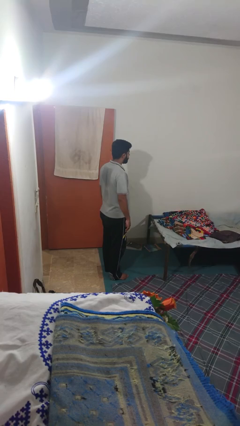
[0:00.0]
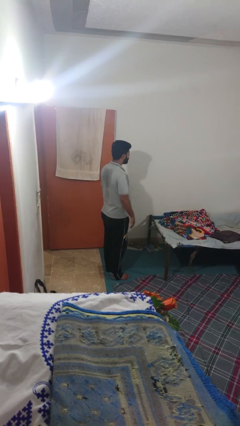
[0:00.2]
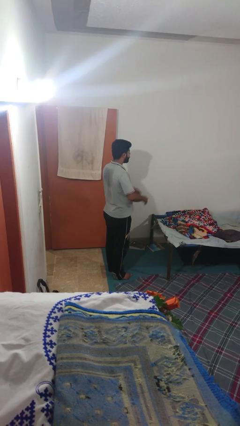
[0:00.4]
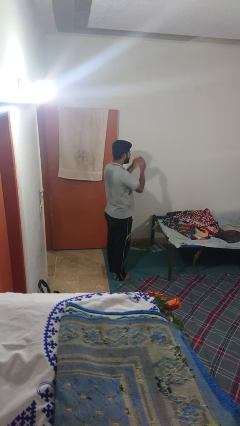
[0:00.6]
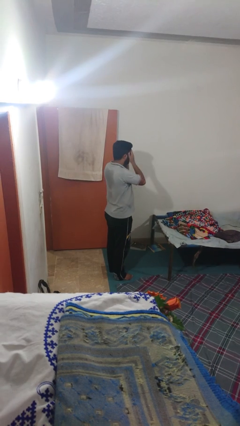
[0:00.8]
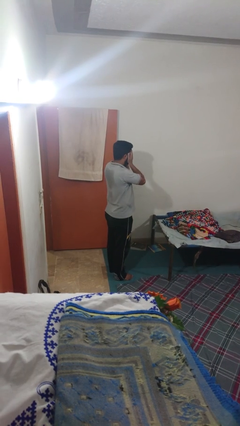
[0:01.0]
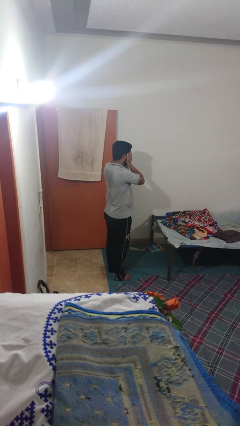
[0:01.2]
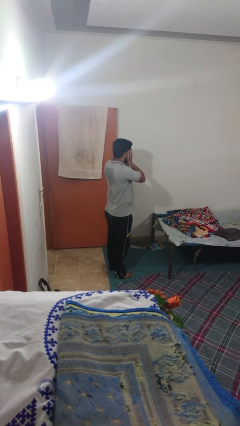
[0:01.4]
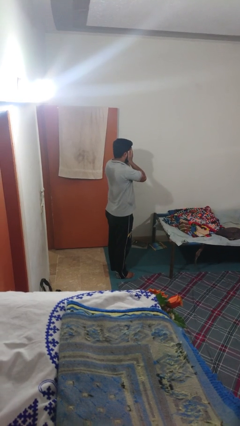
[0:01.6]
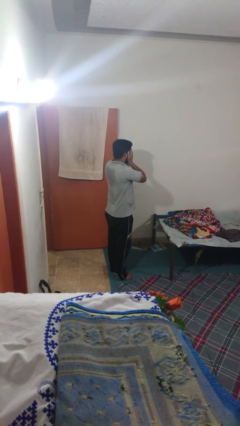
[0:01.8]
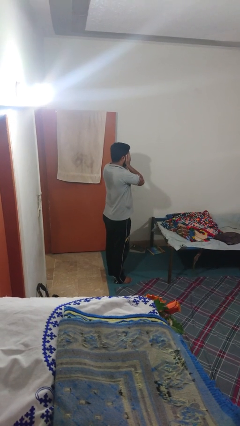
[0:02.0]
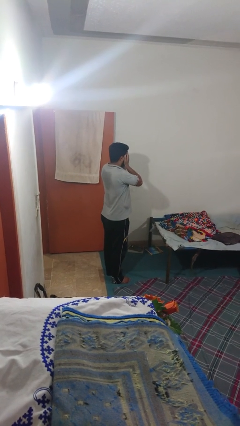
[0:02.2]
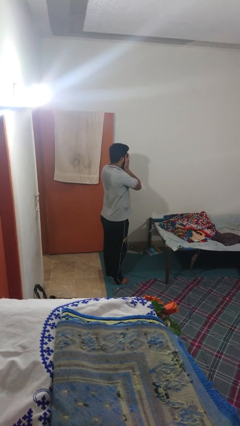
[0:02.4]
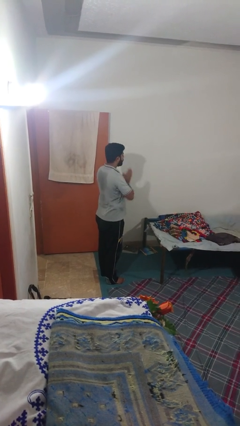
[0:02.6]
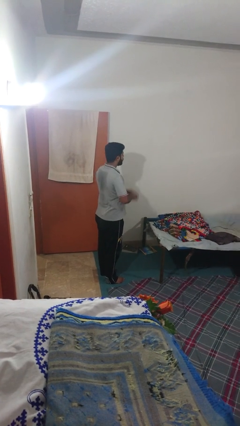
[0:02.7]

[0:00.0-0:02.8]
person covers face with hands

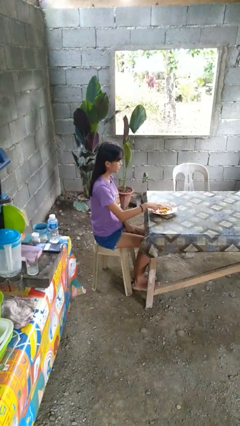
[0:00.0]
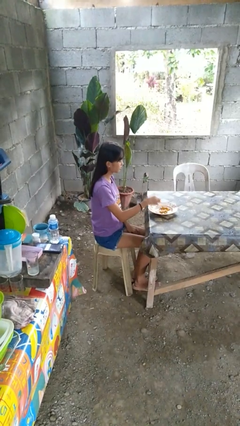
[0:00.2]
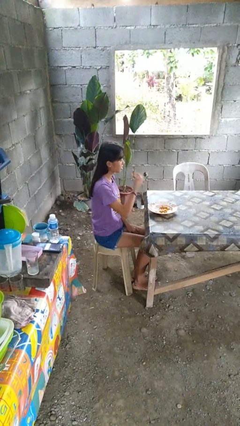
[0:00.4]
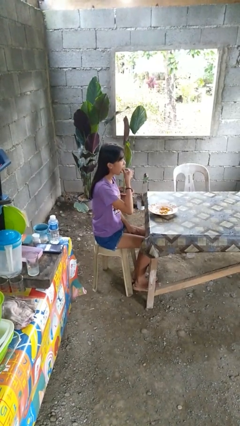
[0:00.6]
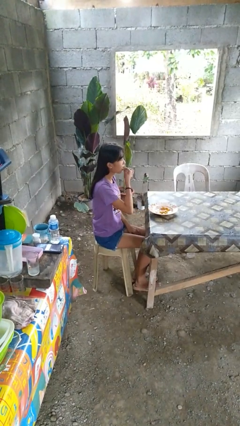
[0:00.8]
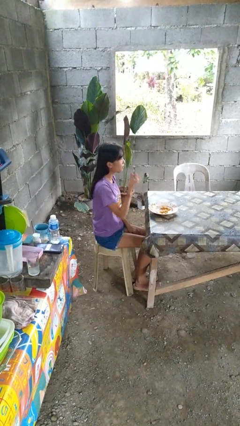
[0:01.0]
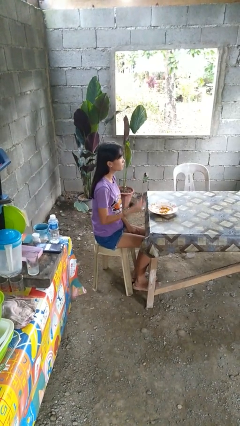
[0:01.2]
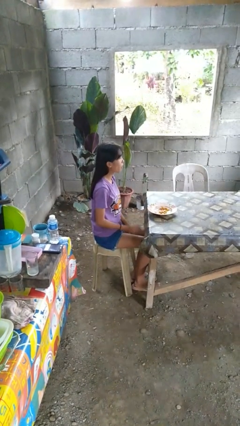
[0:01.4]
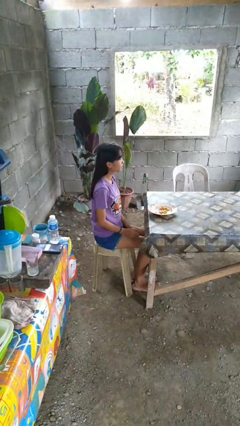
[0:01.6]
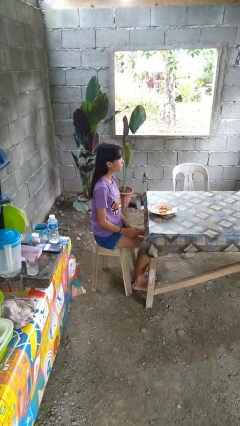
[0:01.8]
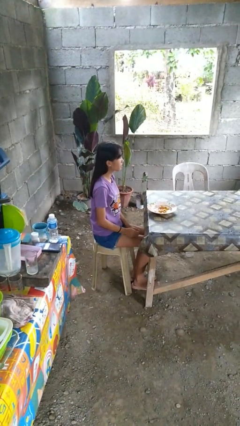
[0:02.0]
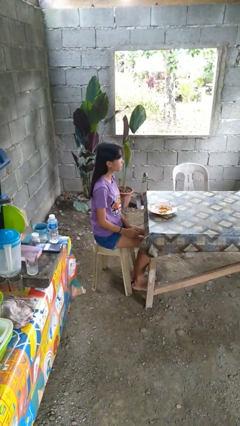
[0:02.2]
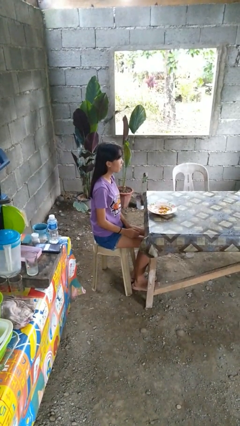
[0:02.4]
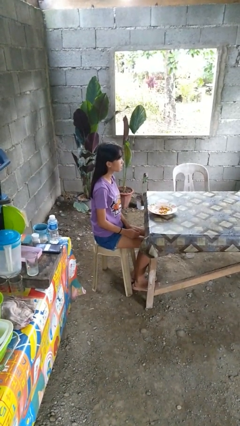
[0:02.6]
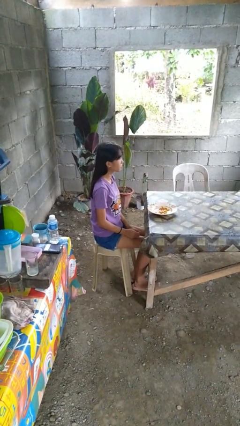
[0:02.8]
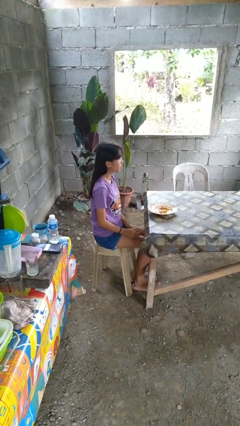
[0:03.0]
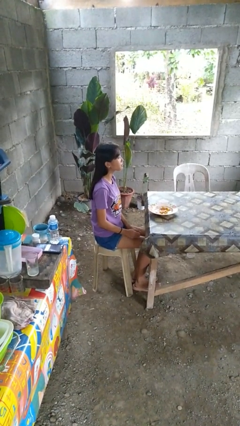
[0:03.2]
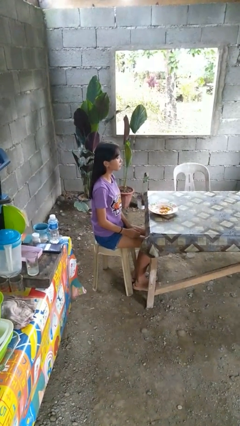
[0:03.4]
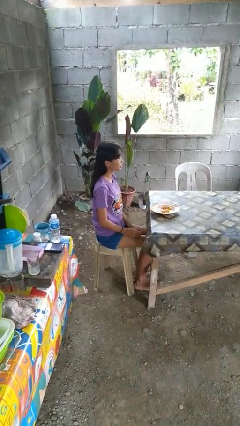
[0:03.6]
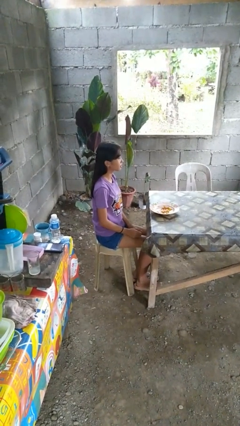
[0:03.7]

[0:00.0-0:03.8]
person eats with hands

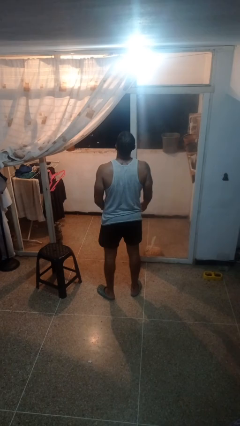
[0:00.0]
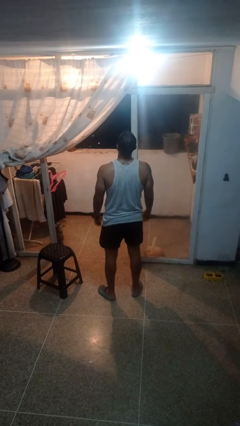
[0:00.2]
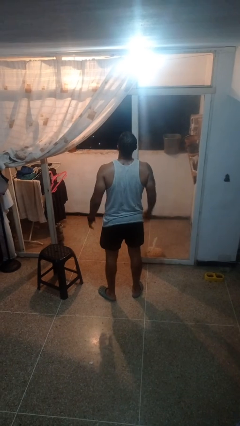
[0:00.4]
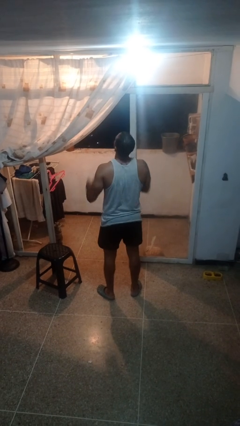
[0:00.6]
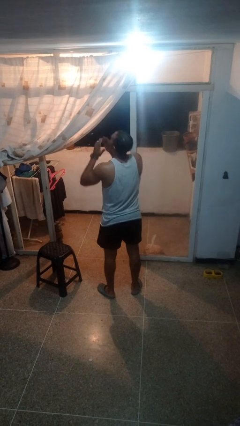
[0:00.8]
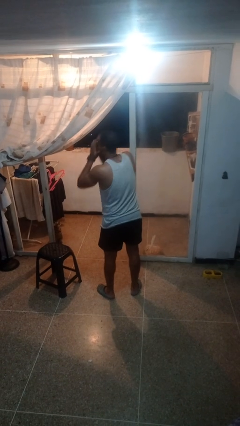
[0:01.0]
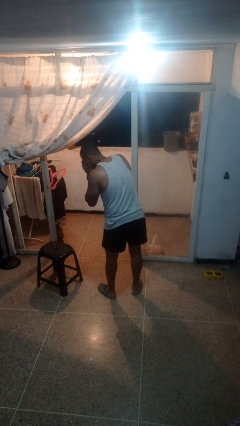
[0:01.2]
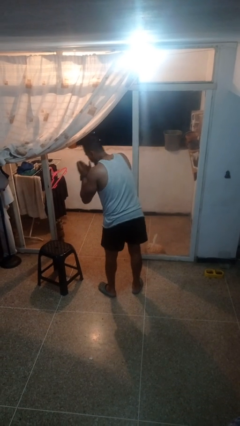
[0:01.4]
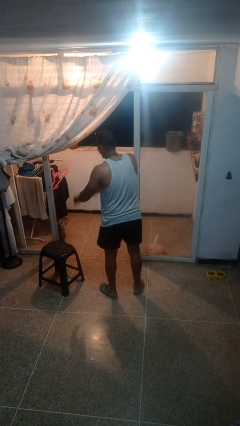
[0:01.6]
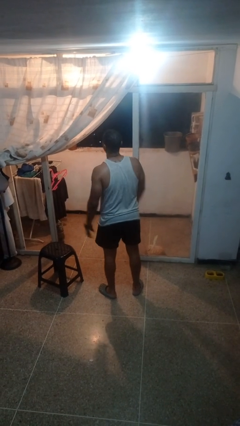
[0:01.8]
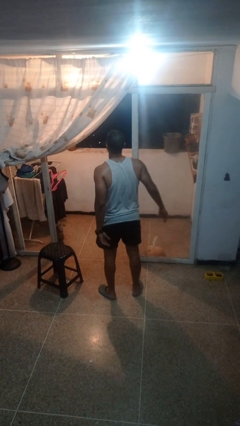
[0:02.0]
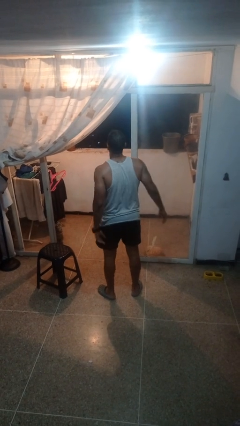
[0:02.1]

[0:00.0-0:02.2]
person sneezes into hand

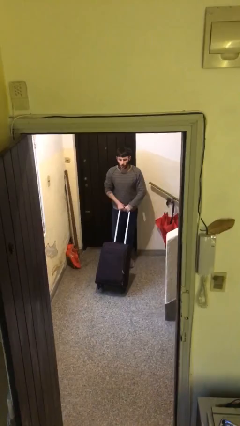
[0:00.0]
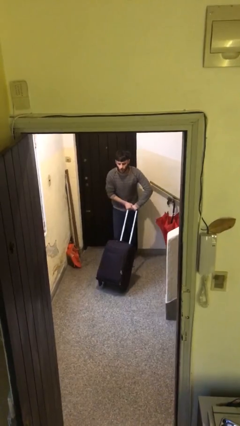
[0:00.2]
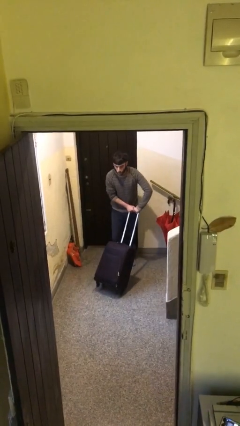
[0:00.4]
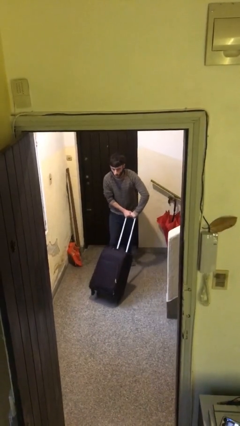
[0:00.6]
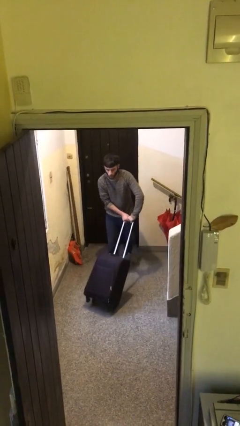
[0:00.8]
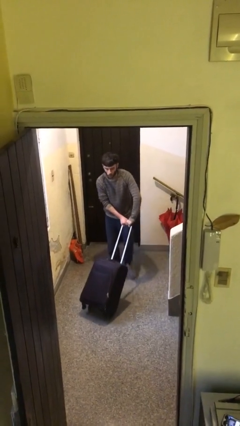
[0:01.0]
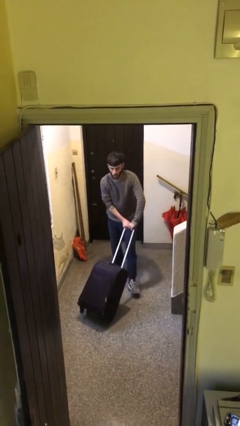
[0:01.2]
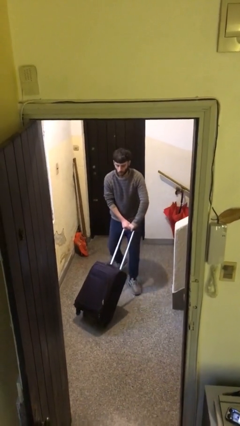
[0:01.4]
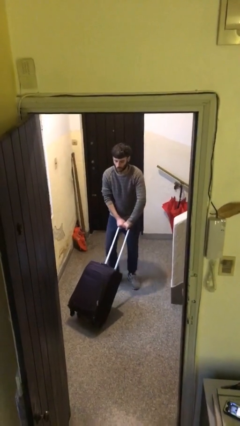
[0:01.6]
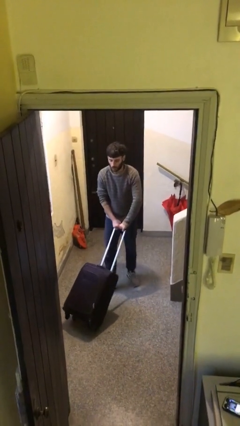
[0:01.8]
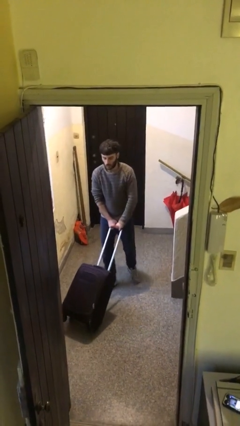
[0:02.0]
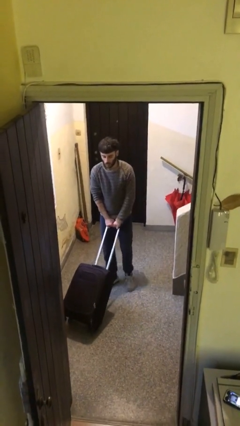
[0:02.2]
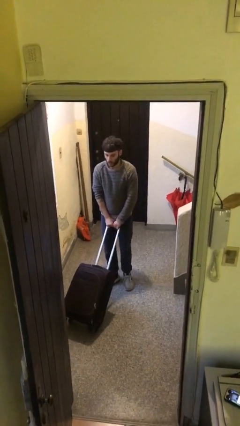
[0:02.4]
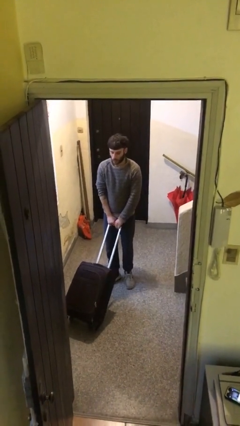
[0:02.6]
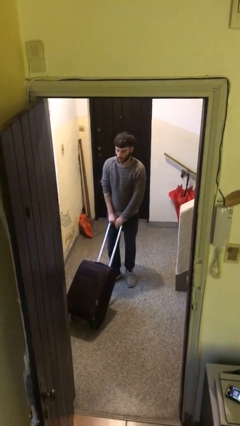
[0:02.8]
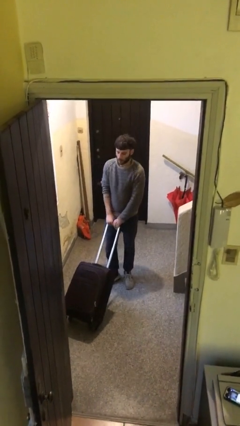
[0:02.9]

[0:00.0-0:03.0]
person pushes wheeled cart

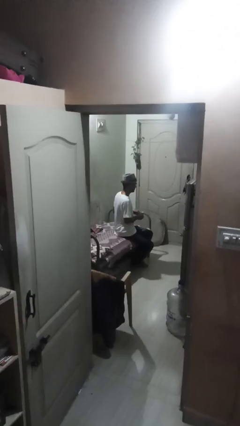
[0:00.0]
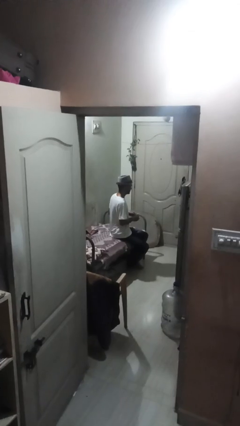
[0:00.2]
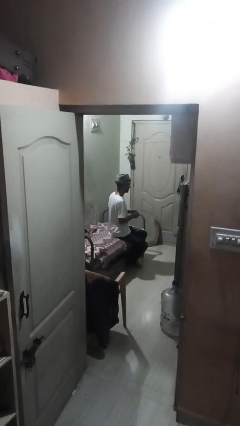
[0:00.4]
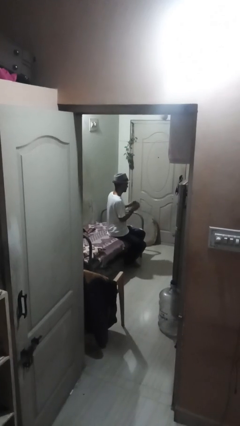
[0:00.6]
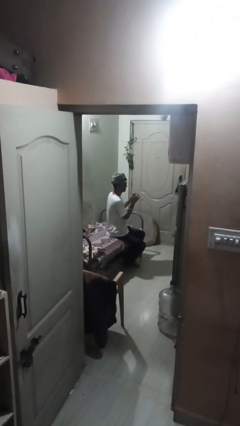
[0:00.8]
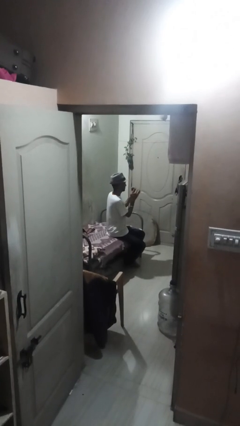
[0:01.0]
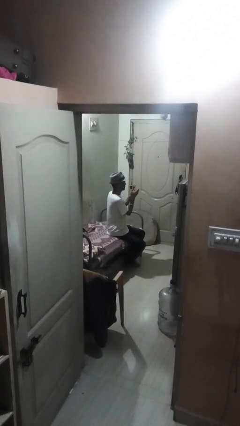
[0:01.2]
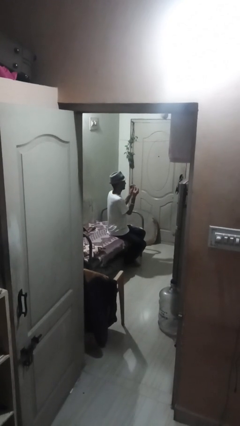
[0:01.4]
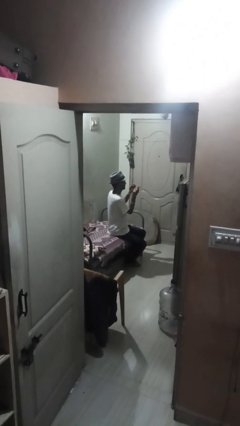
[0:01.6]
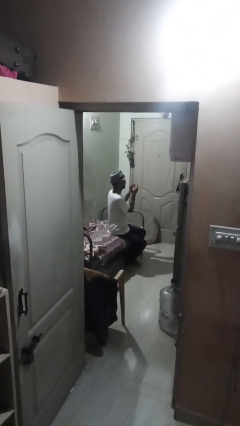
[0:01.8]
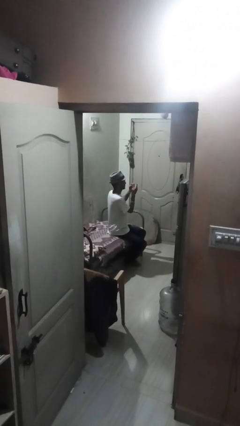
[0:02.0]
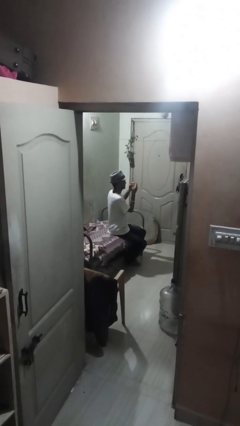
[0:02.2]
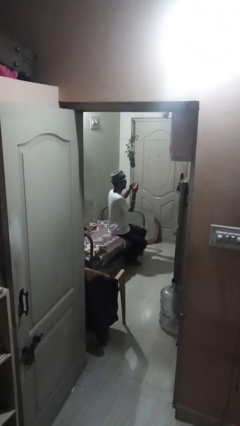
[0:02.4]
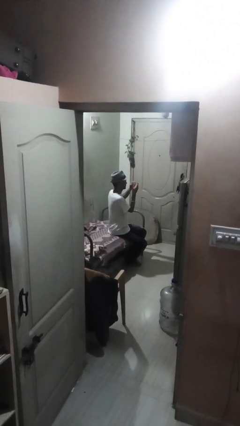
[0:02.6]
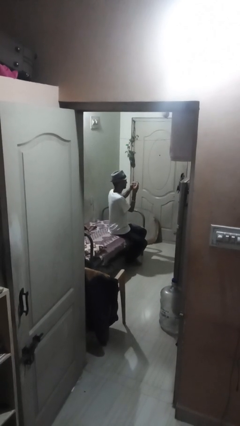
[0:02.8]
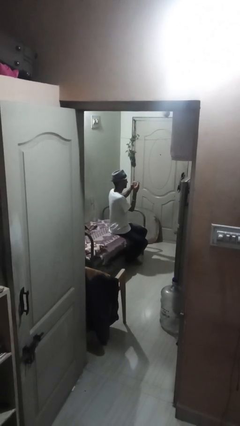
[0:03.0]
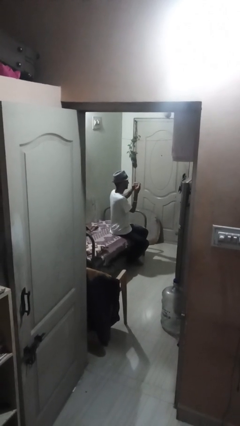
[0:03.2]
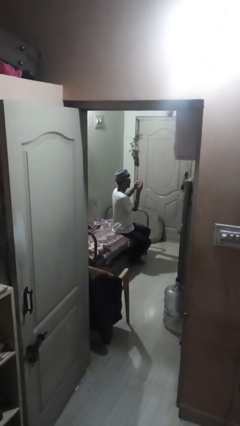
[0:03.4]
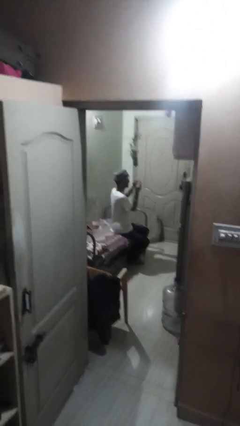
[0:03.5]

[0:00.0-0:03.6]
person files fingernails

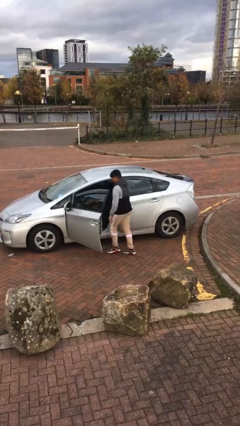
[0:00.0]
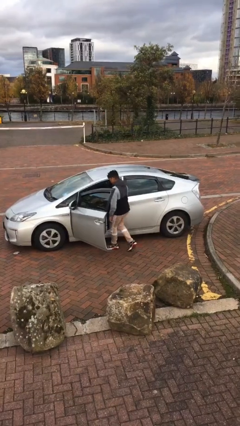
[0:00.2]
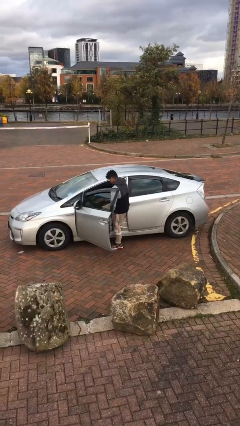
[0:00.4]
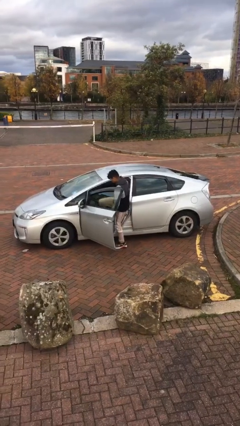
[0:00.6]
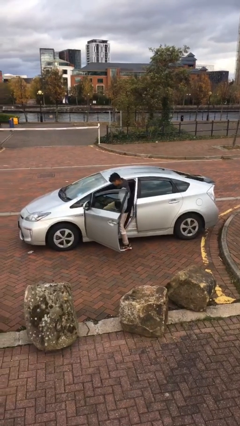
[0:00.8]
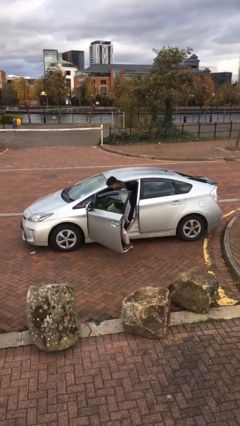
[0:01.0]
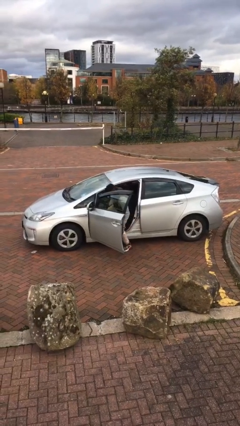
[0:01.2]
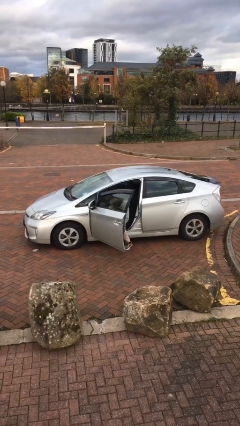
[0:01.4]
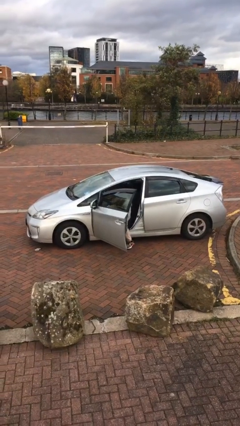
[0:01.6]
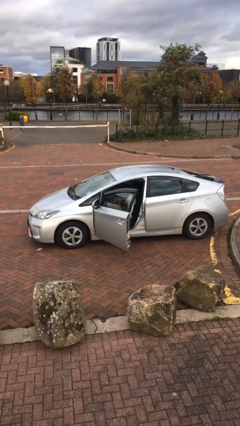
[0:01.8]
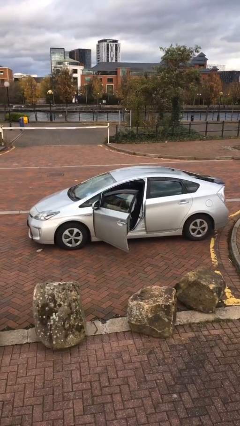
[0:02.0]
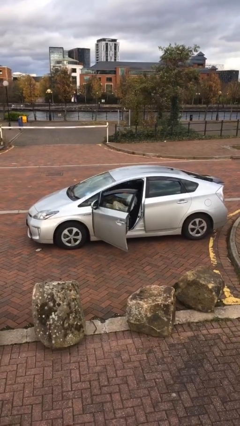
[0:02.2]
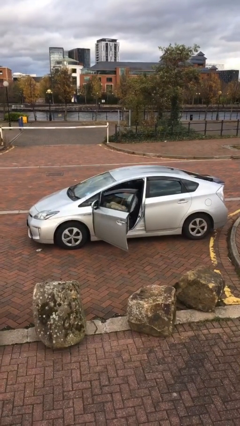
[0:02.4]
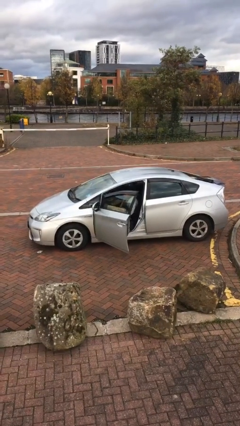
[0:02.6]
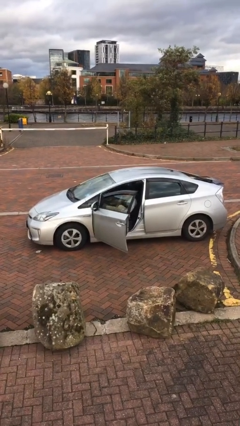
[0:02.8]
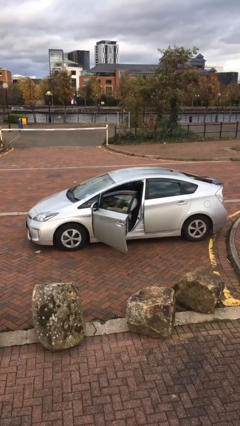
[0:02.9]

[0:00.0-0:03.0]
person enters car
